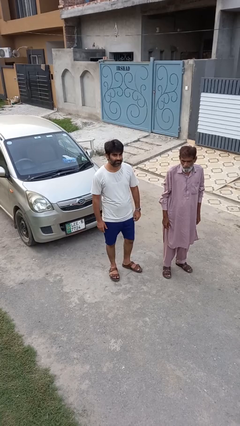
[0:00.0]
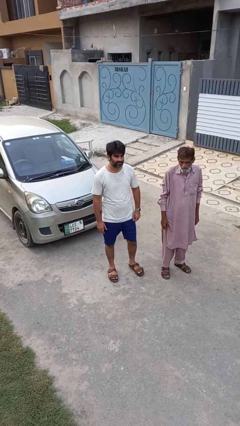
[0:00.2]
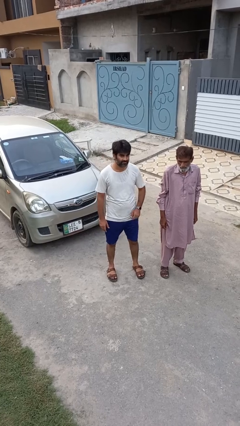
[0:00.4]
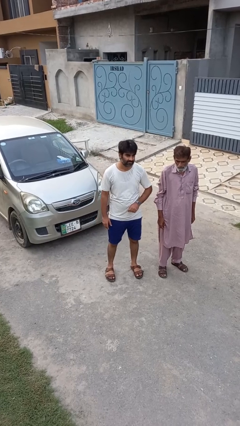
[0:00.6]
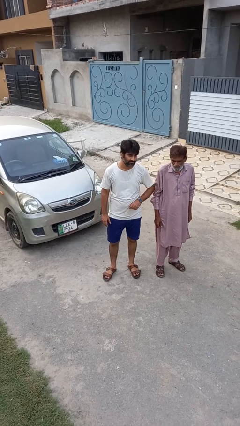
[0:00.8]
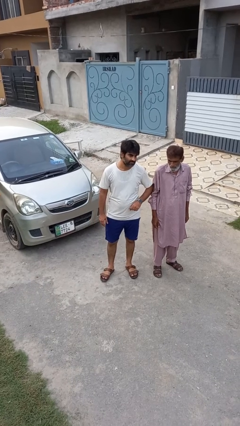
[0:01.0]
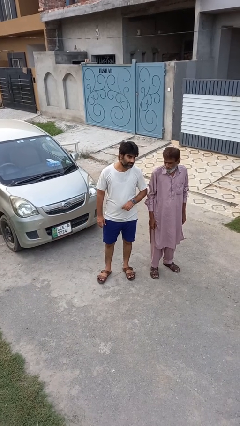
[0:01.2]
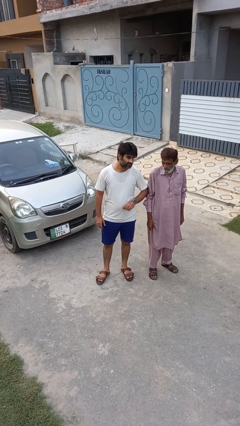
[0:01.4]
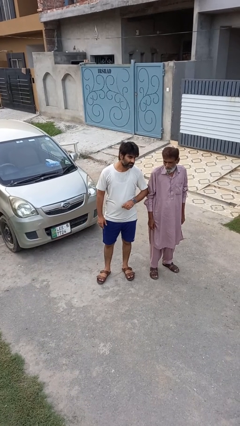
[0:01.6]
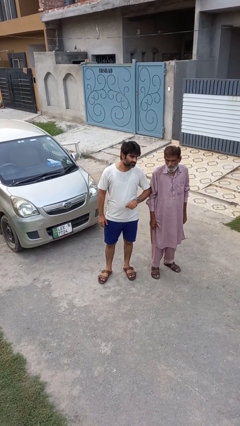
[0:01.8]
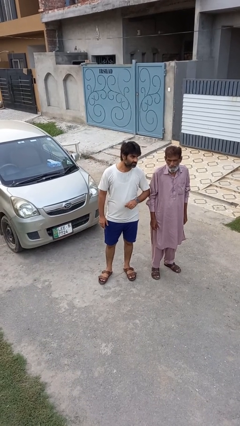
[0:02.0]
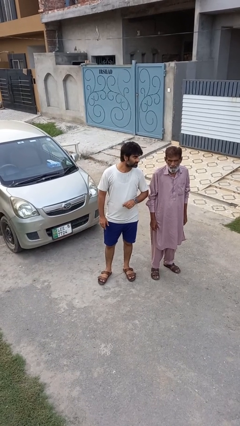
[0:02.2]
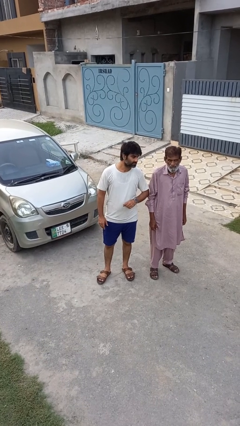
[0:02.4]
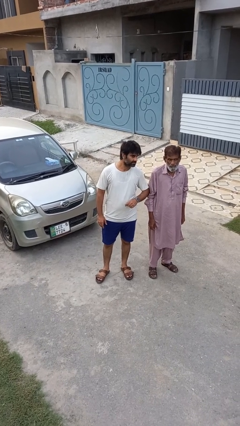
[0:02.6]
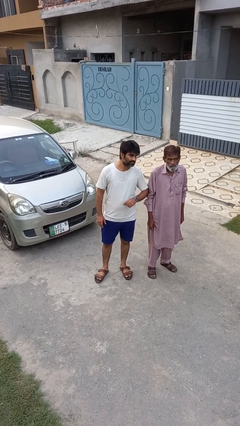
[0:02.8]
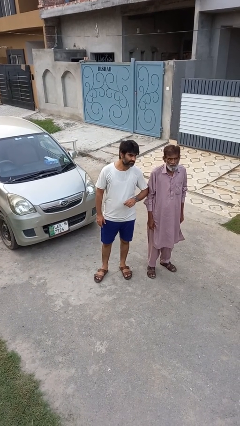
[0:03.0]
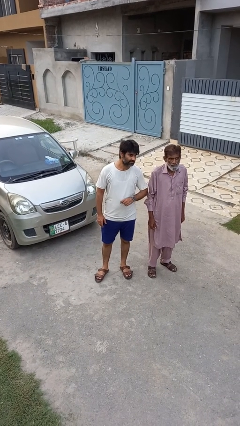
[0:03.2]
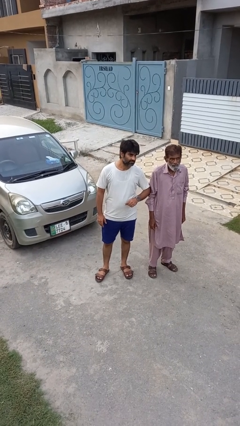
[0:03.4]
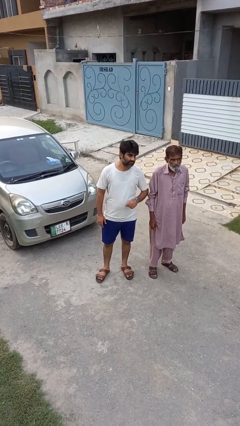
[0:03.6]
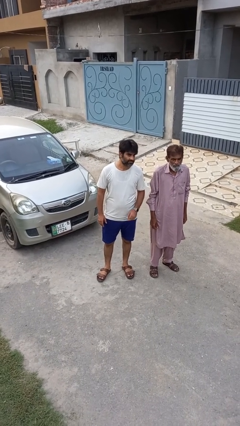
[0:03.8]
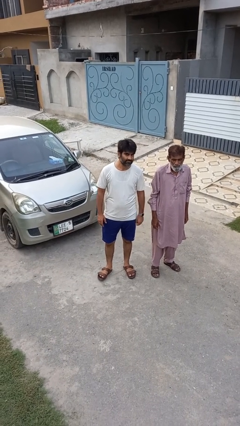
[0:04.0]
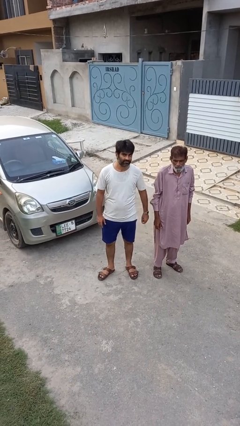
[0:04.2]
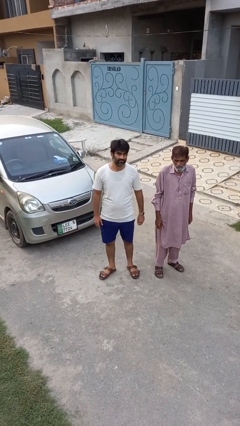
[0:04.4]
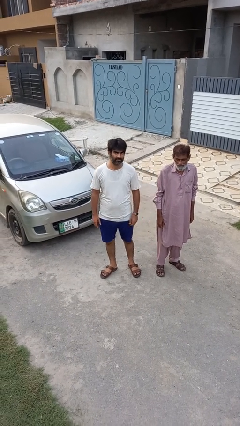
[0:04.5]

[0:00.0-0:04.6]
person nudges person with elbow

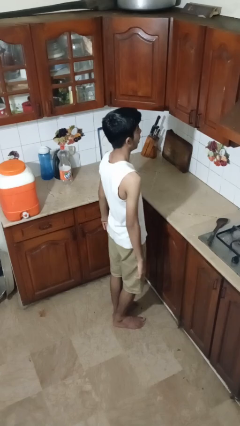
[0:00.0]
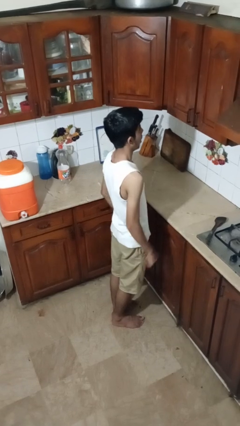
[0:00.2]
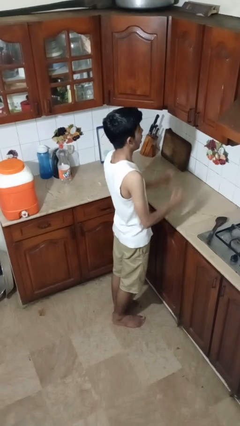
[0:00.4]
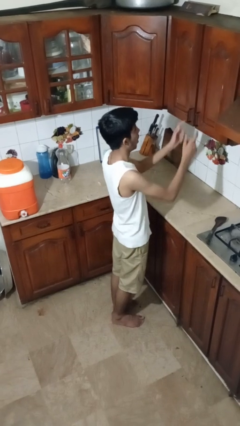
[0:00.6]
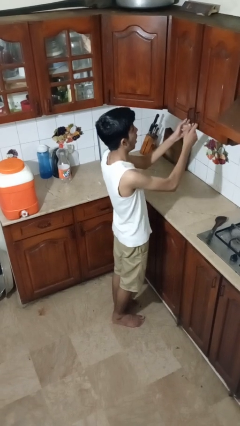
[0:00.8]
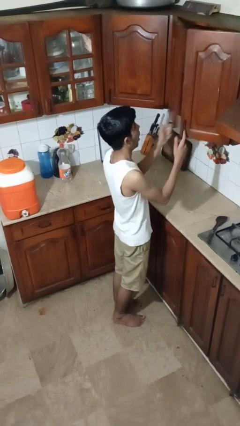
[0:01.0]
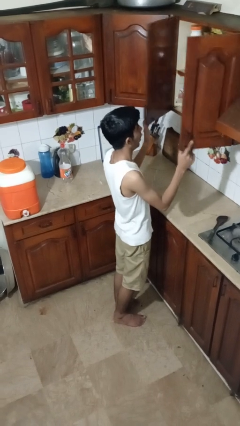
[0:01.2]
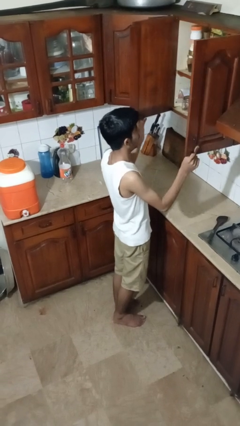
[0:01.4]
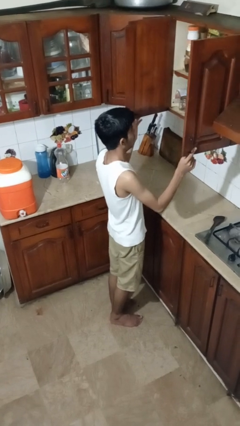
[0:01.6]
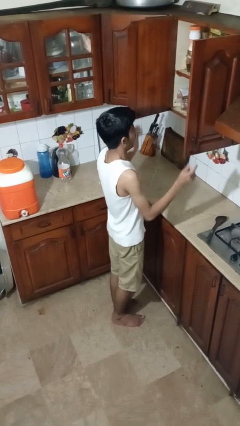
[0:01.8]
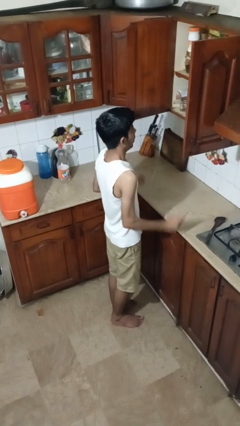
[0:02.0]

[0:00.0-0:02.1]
person opens cabinet

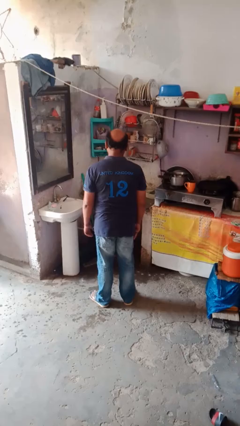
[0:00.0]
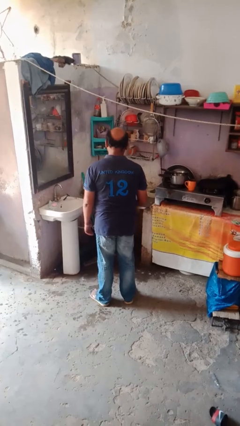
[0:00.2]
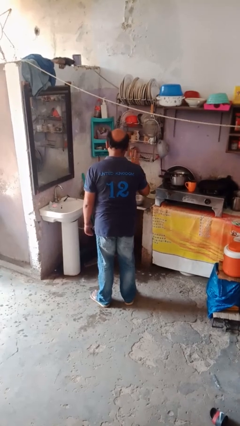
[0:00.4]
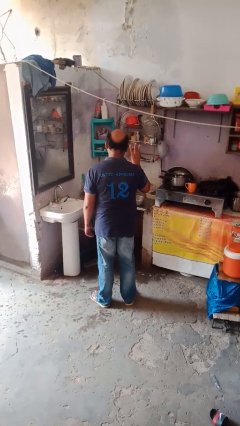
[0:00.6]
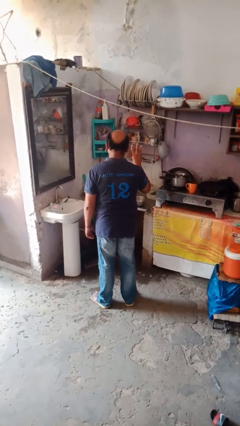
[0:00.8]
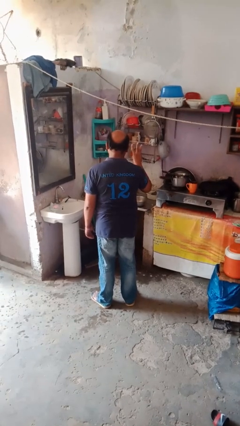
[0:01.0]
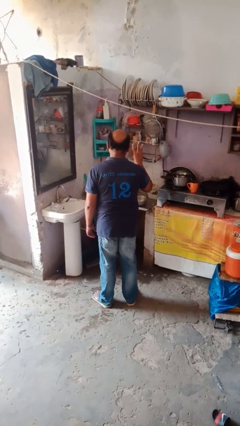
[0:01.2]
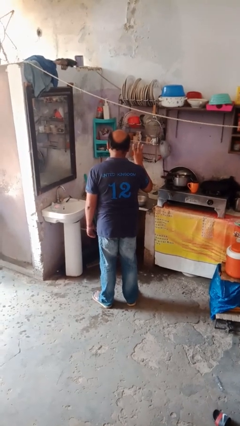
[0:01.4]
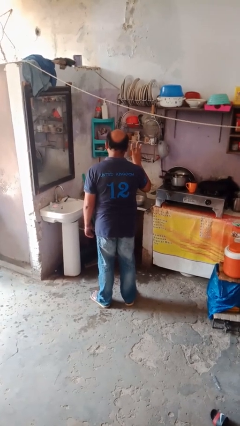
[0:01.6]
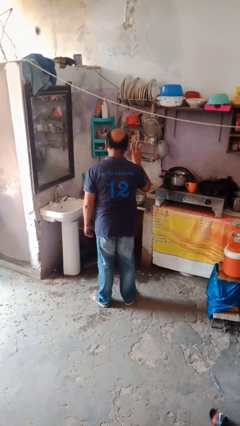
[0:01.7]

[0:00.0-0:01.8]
person gestures number three

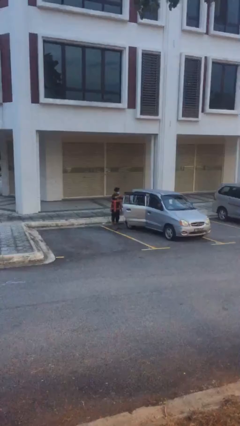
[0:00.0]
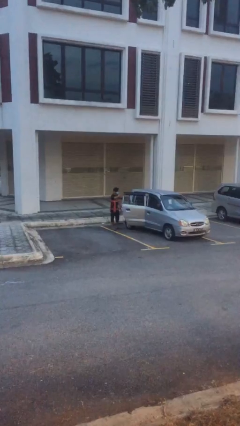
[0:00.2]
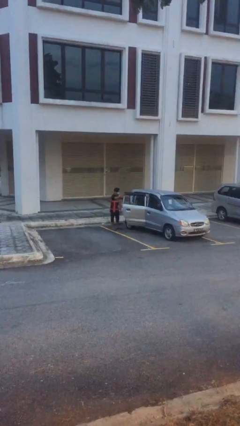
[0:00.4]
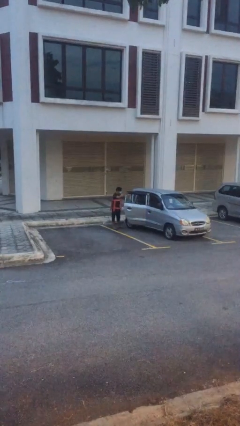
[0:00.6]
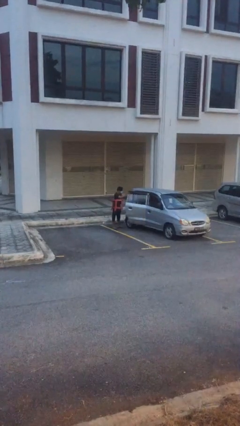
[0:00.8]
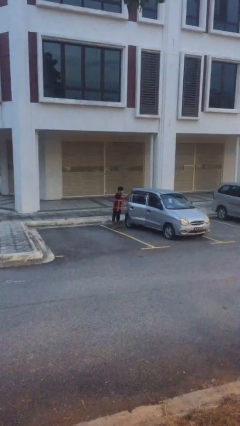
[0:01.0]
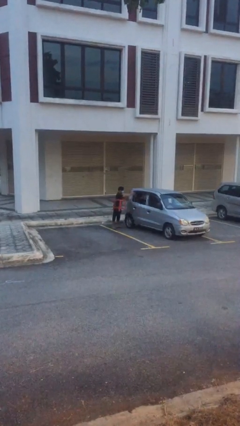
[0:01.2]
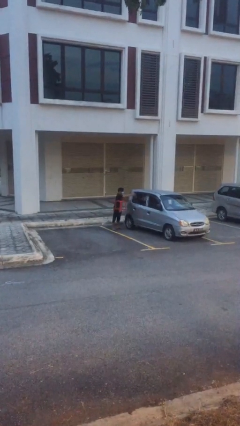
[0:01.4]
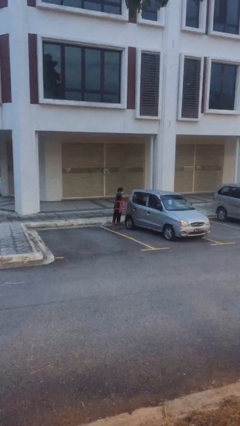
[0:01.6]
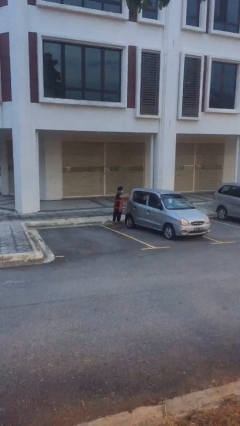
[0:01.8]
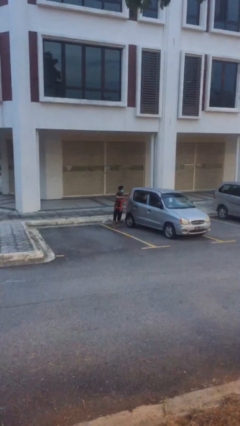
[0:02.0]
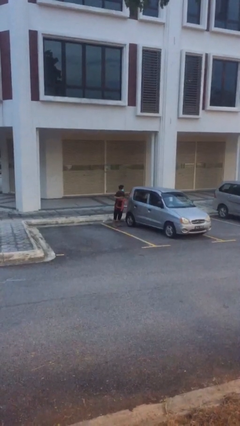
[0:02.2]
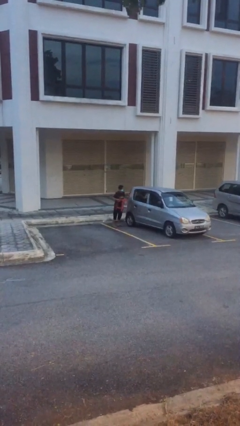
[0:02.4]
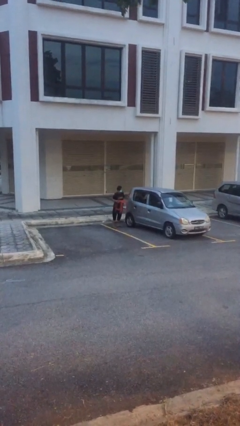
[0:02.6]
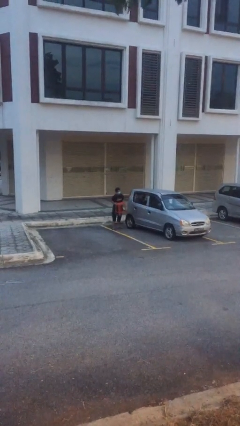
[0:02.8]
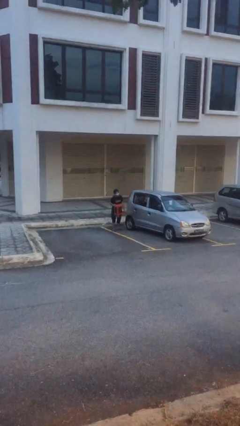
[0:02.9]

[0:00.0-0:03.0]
person closes car door

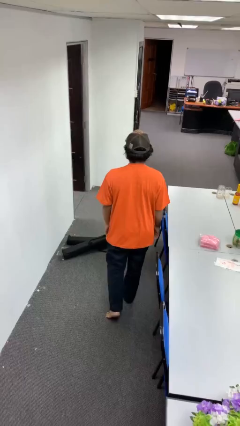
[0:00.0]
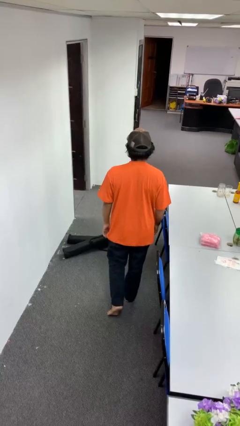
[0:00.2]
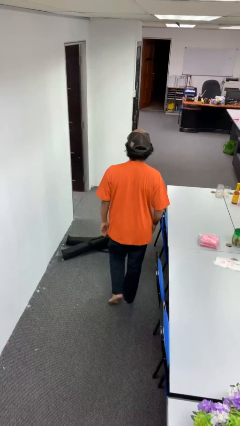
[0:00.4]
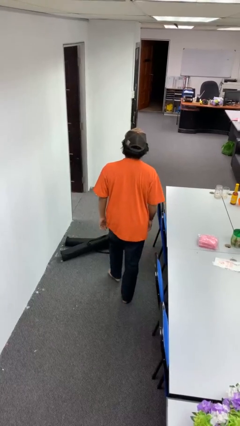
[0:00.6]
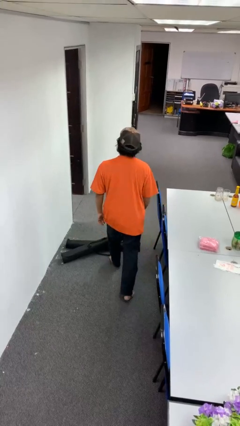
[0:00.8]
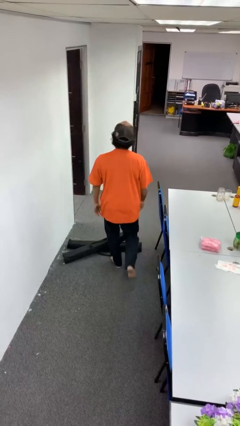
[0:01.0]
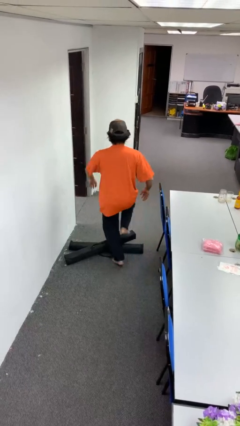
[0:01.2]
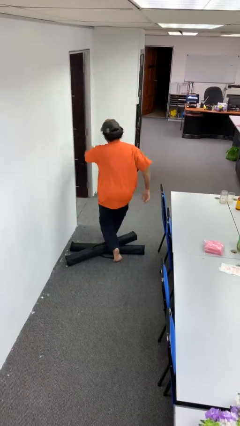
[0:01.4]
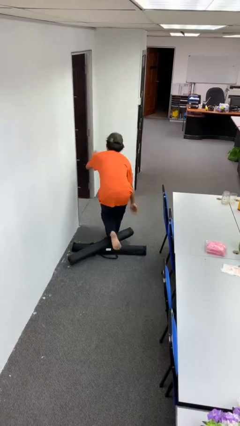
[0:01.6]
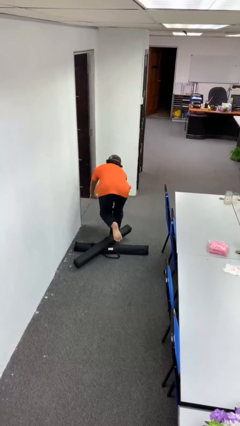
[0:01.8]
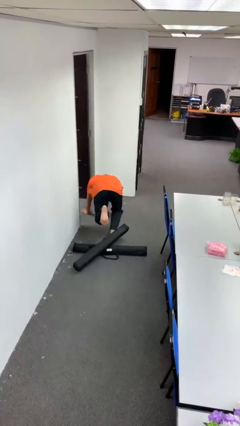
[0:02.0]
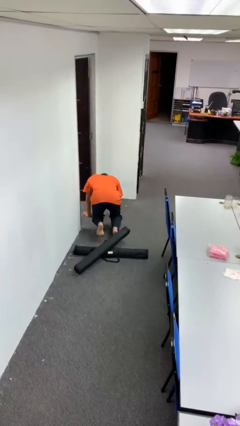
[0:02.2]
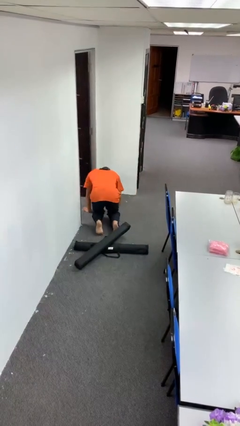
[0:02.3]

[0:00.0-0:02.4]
person trips on object on floor

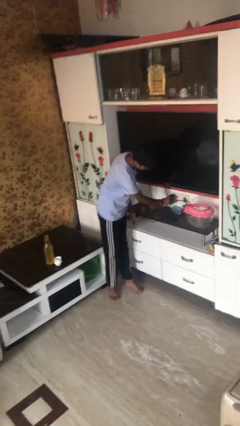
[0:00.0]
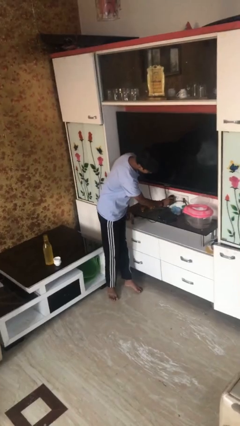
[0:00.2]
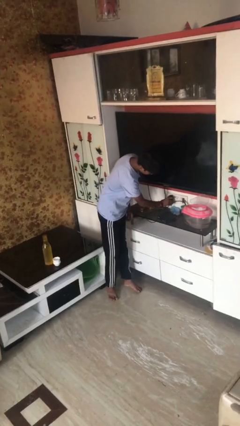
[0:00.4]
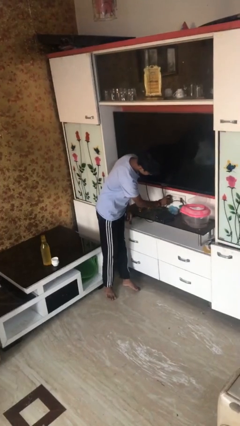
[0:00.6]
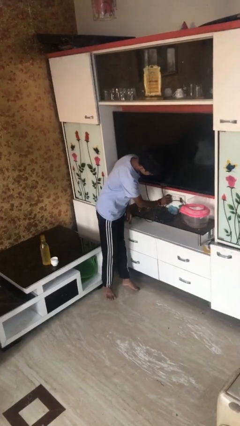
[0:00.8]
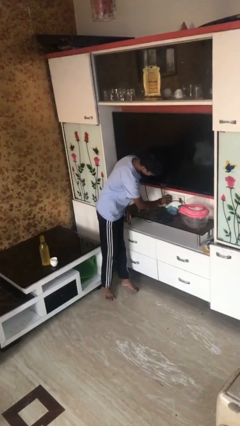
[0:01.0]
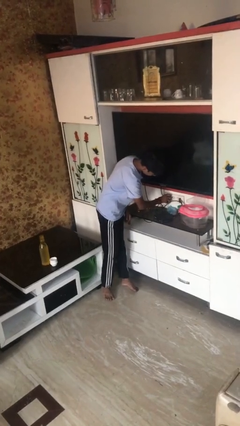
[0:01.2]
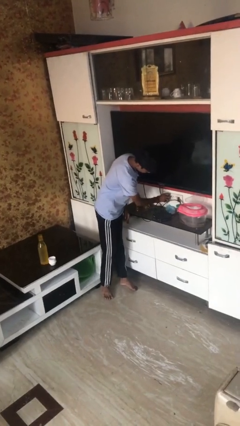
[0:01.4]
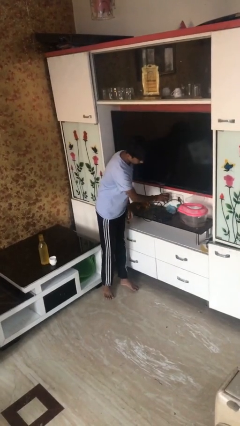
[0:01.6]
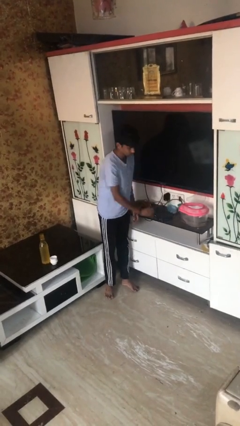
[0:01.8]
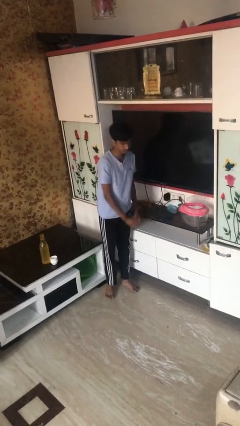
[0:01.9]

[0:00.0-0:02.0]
person plugs into electrical socket

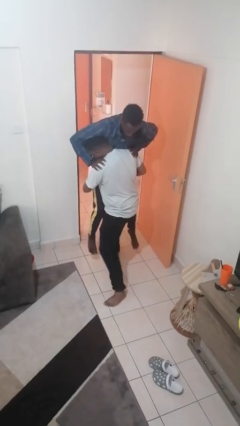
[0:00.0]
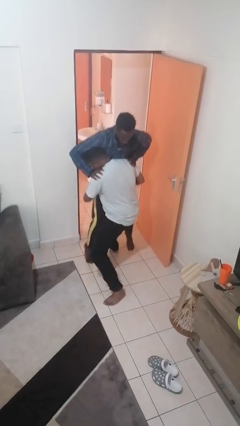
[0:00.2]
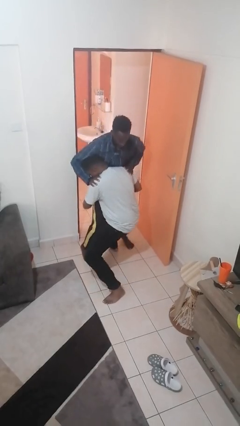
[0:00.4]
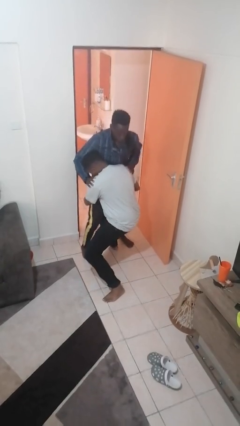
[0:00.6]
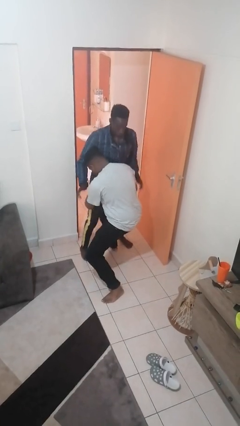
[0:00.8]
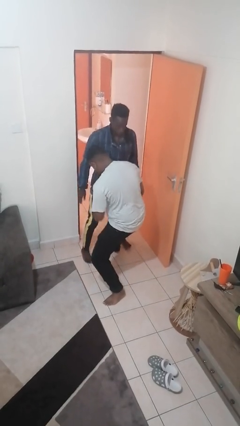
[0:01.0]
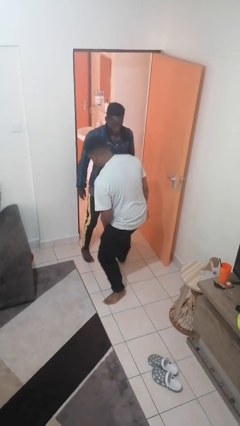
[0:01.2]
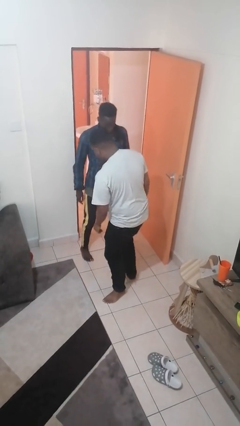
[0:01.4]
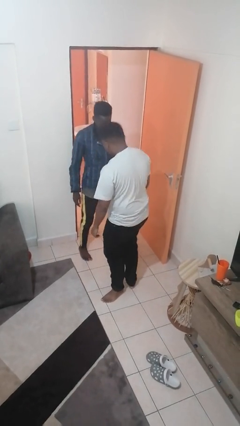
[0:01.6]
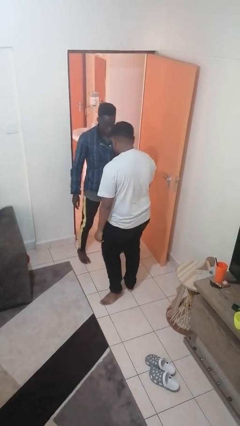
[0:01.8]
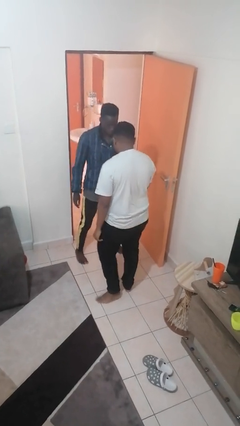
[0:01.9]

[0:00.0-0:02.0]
person puts down person
